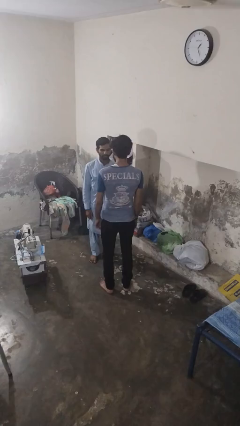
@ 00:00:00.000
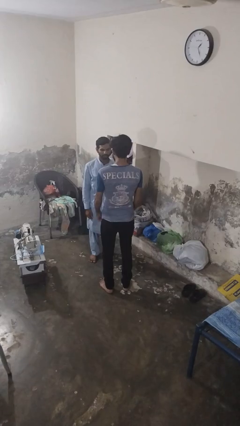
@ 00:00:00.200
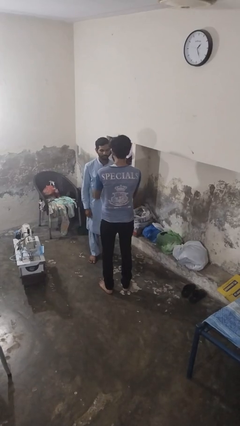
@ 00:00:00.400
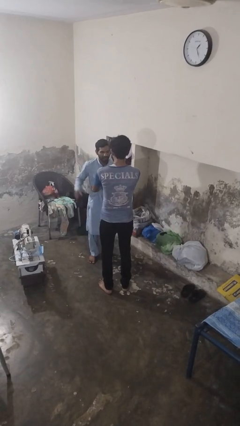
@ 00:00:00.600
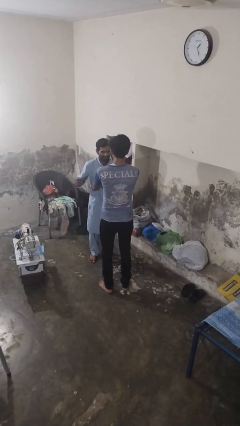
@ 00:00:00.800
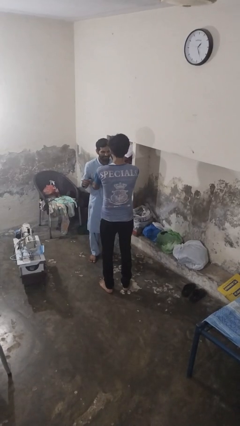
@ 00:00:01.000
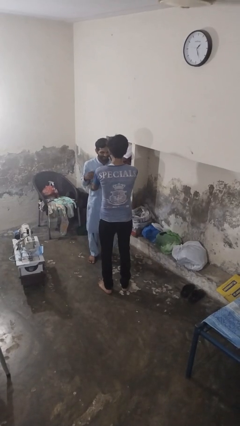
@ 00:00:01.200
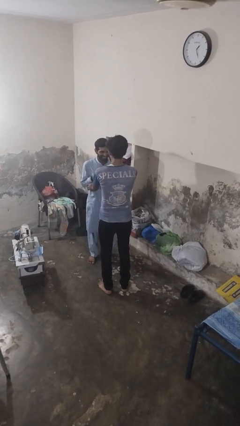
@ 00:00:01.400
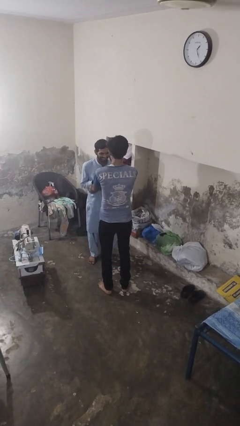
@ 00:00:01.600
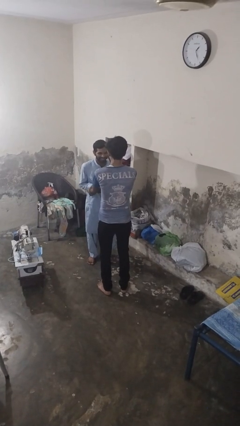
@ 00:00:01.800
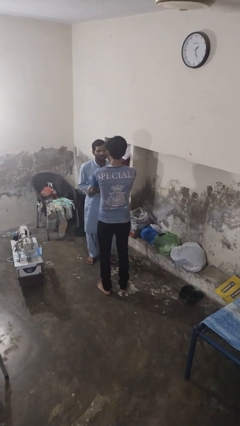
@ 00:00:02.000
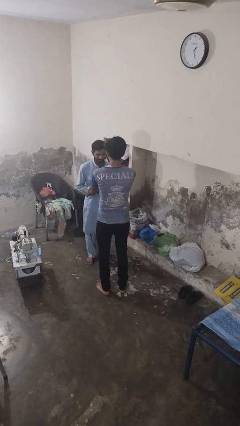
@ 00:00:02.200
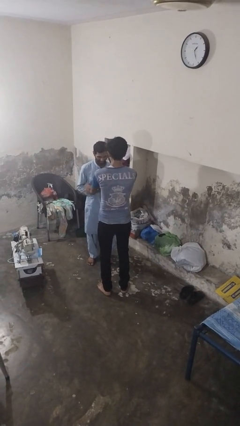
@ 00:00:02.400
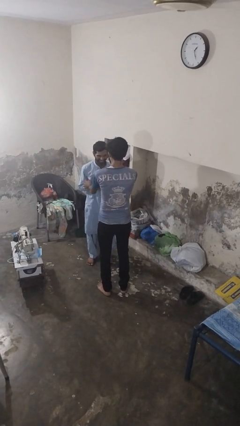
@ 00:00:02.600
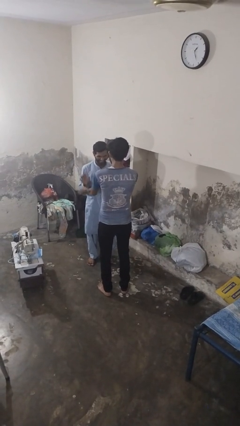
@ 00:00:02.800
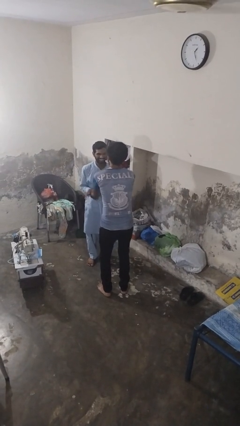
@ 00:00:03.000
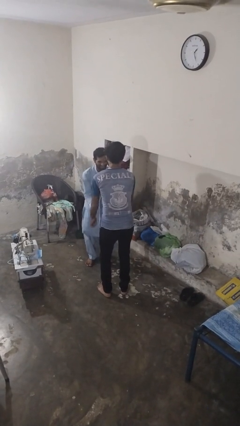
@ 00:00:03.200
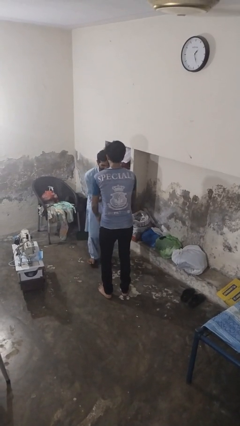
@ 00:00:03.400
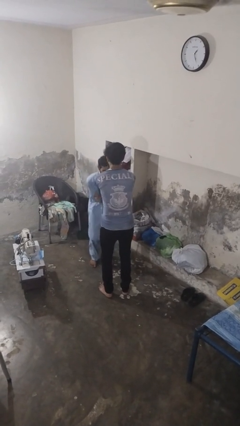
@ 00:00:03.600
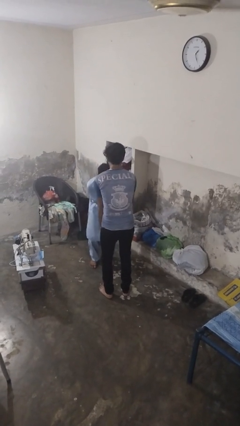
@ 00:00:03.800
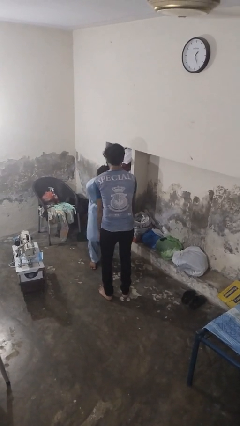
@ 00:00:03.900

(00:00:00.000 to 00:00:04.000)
person tickles person

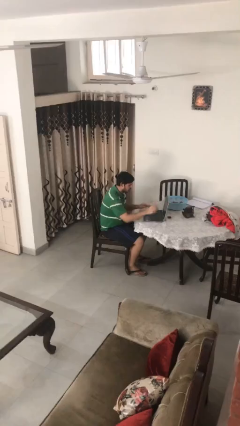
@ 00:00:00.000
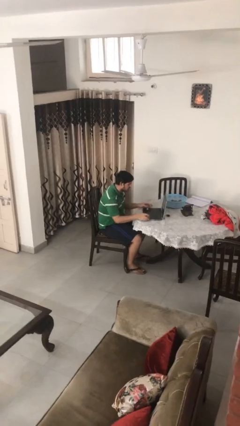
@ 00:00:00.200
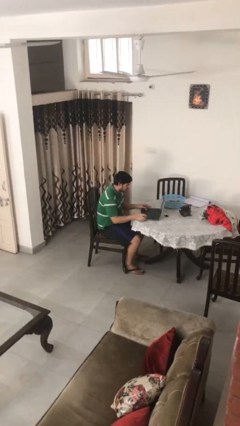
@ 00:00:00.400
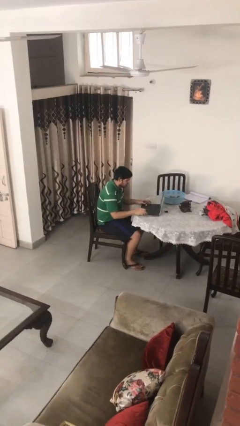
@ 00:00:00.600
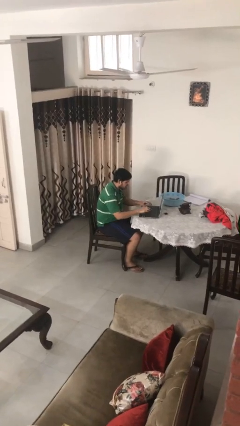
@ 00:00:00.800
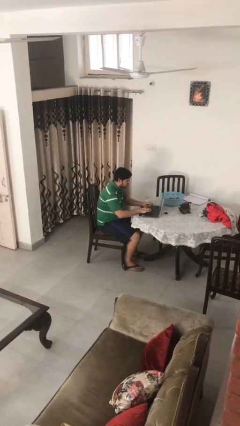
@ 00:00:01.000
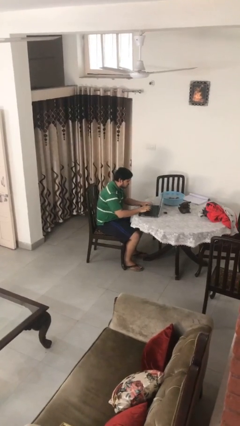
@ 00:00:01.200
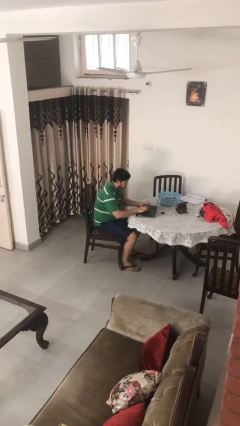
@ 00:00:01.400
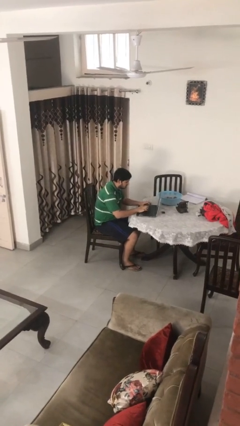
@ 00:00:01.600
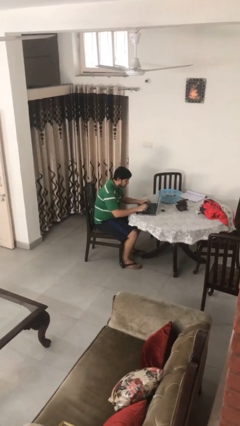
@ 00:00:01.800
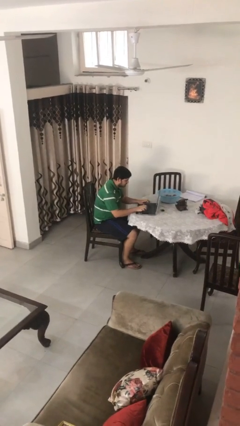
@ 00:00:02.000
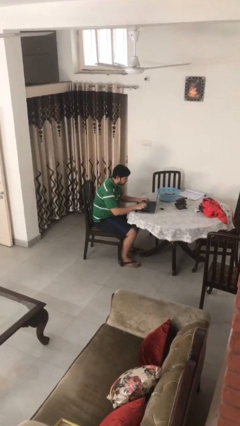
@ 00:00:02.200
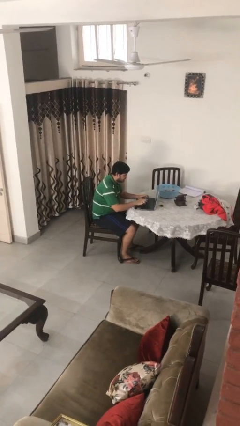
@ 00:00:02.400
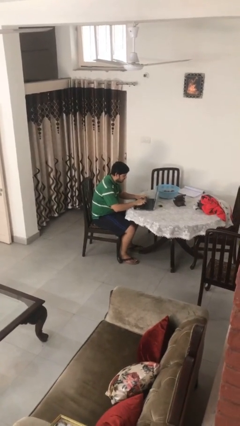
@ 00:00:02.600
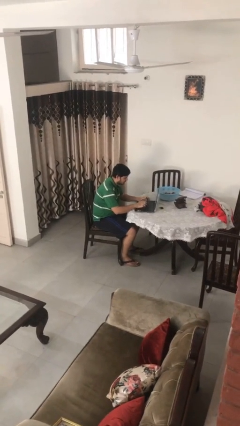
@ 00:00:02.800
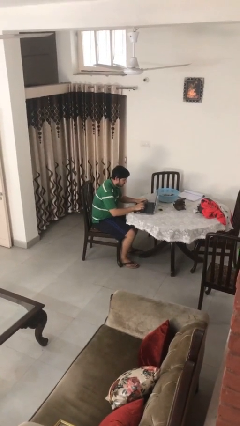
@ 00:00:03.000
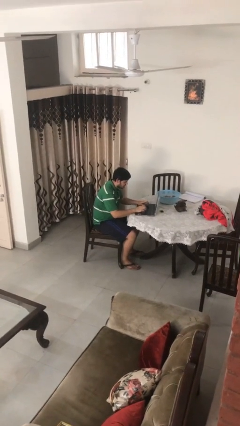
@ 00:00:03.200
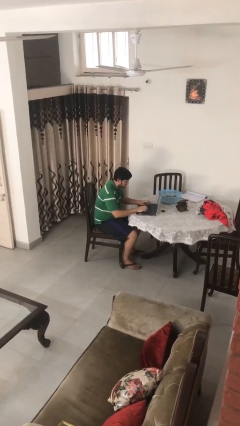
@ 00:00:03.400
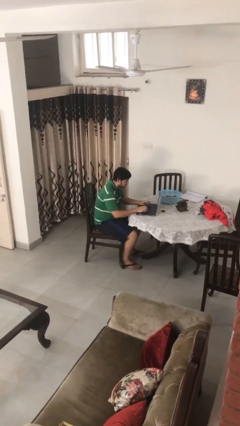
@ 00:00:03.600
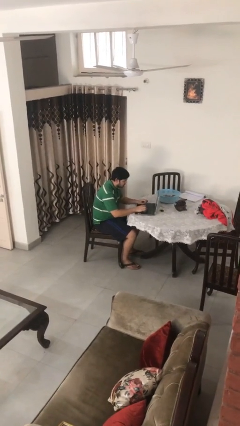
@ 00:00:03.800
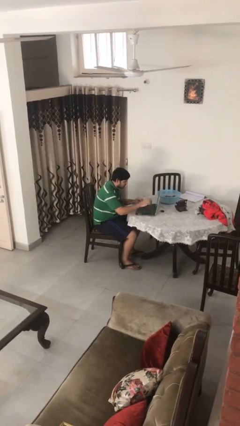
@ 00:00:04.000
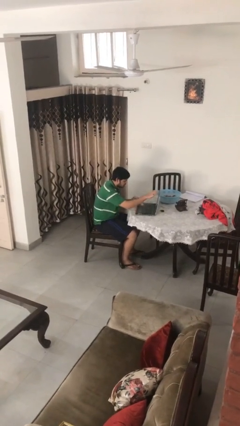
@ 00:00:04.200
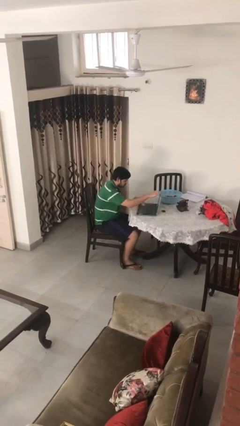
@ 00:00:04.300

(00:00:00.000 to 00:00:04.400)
person interacts with laptop

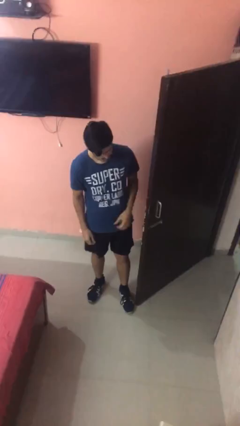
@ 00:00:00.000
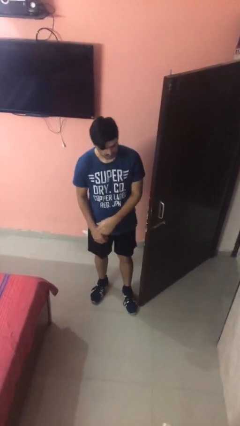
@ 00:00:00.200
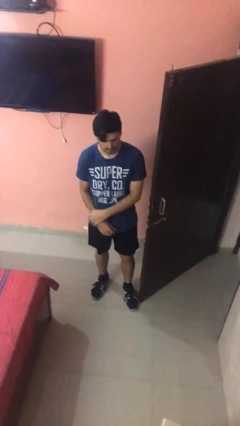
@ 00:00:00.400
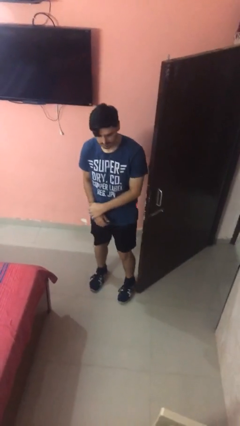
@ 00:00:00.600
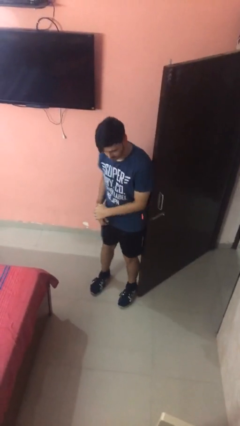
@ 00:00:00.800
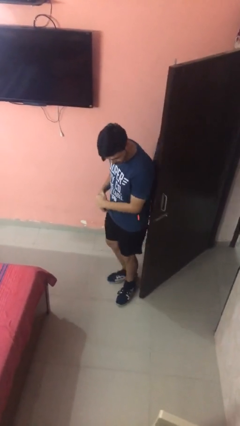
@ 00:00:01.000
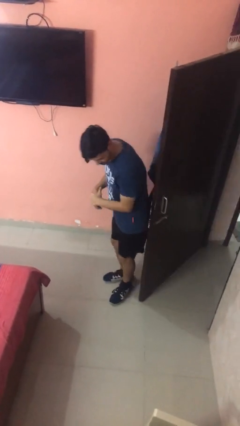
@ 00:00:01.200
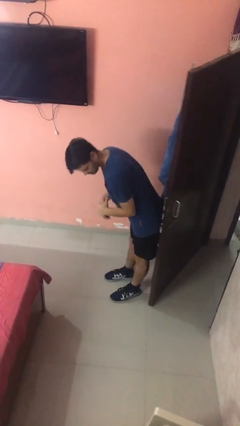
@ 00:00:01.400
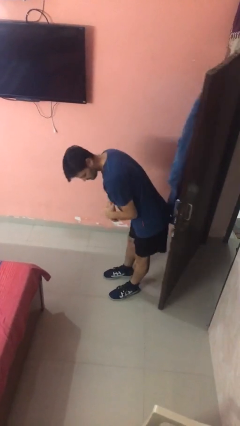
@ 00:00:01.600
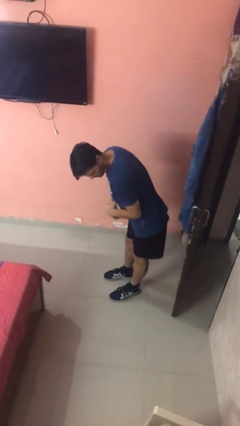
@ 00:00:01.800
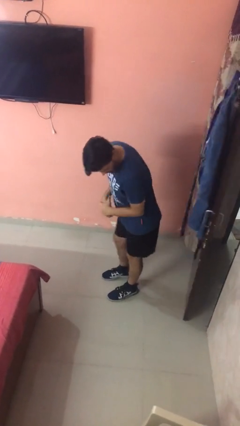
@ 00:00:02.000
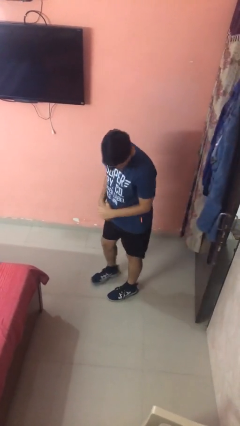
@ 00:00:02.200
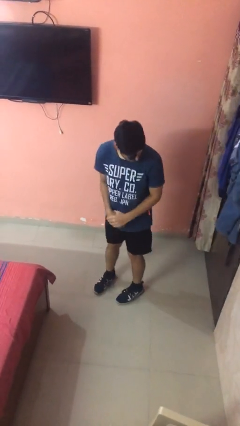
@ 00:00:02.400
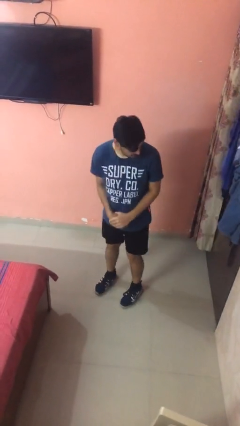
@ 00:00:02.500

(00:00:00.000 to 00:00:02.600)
person closes door with hip

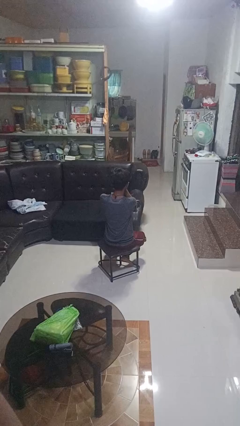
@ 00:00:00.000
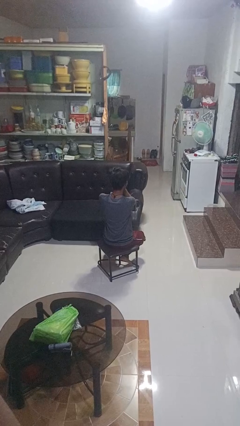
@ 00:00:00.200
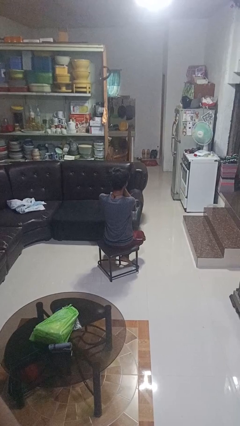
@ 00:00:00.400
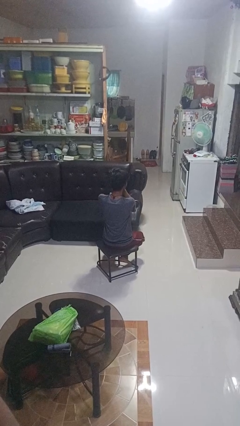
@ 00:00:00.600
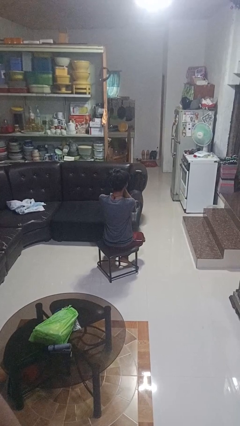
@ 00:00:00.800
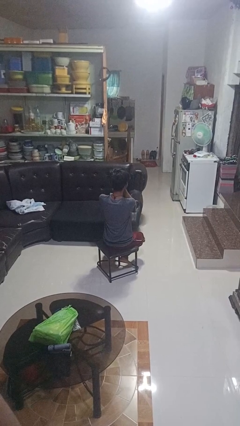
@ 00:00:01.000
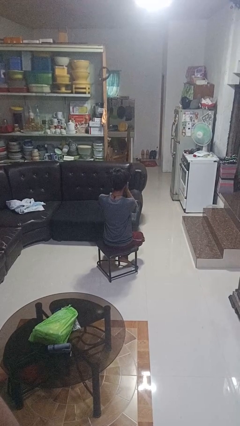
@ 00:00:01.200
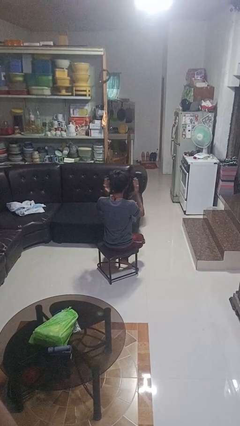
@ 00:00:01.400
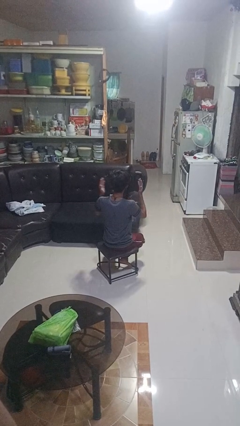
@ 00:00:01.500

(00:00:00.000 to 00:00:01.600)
person covers face with hands

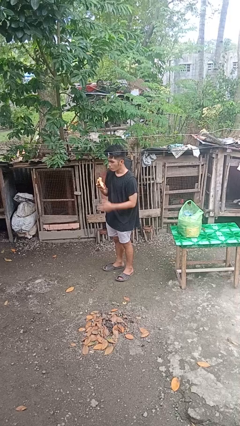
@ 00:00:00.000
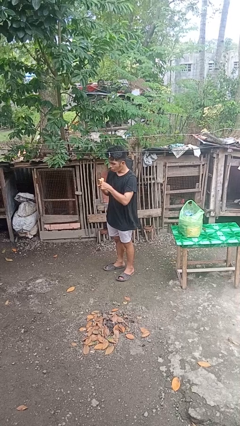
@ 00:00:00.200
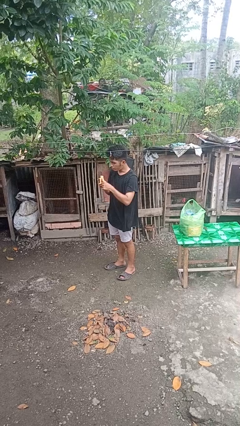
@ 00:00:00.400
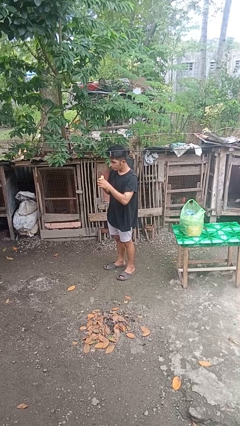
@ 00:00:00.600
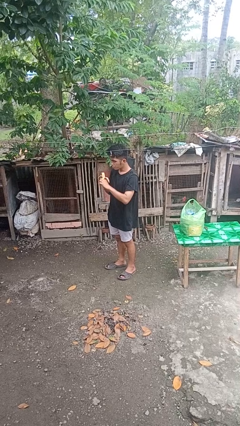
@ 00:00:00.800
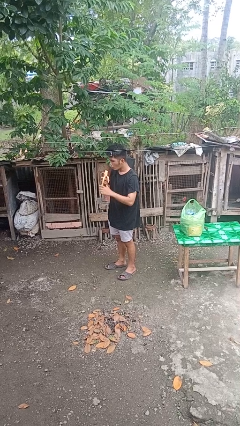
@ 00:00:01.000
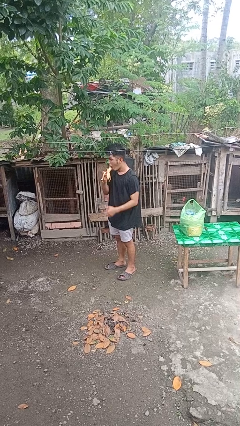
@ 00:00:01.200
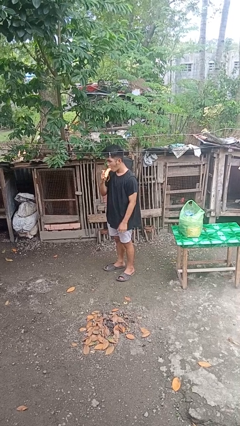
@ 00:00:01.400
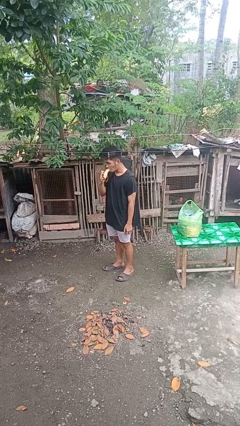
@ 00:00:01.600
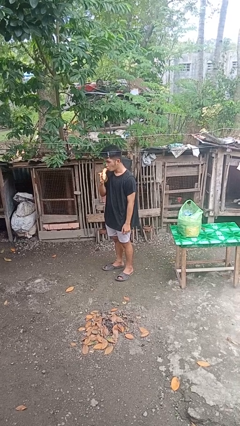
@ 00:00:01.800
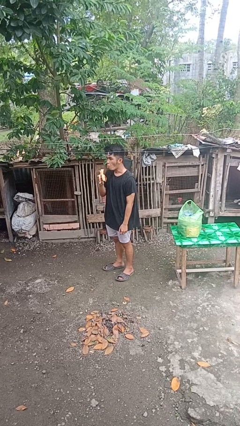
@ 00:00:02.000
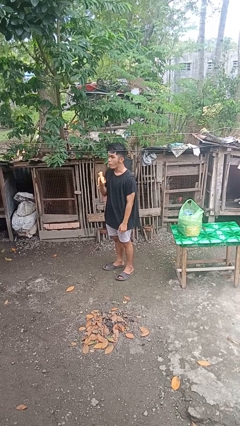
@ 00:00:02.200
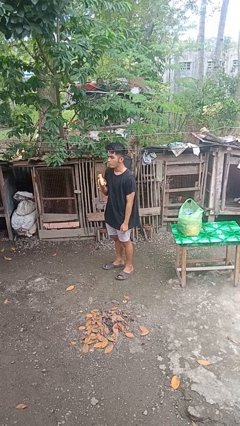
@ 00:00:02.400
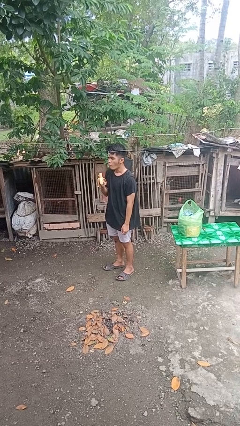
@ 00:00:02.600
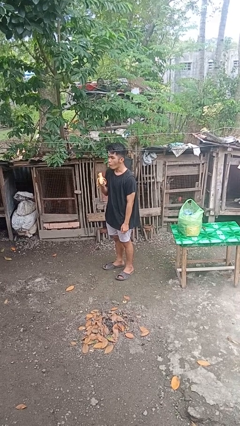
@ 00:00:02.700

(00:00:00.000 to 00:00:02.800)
person eats banana

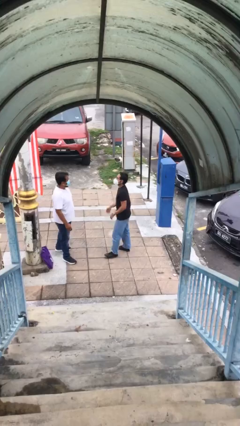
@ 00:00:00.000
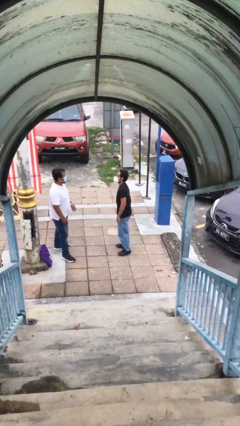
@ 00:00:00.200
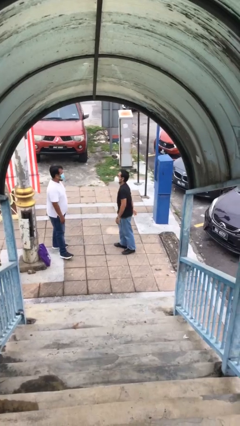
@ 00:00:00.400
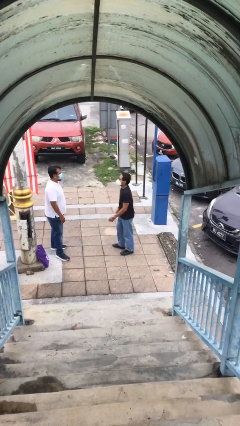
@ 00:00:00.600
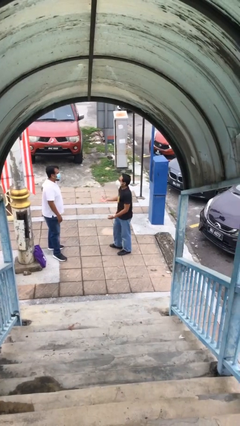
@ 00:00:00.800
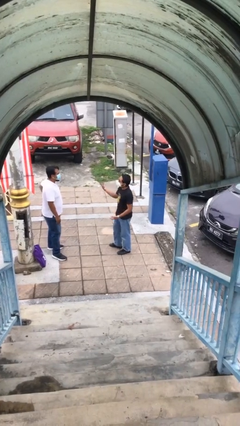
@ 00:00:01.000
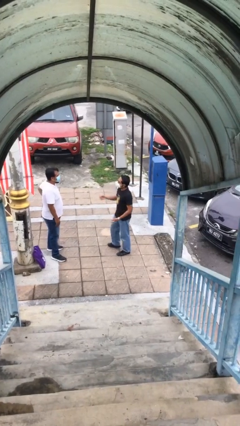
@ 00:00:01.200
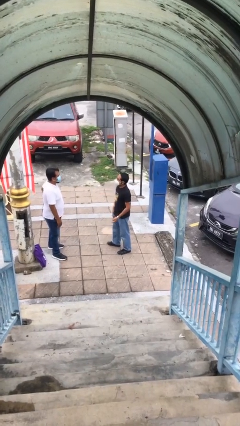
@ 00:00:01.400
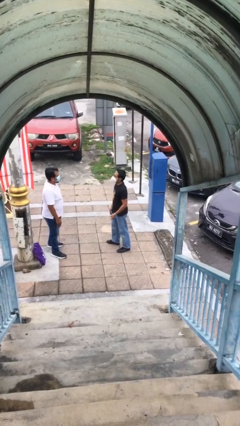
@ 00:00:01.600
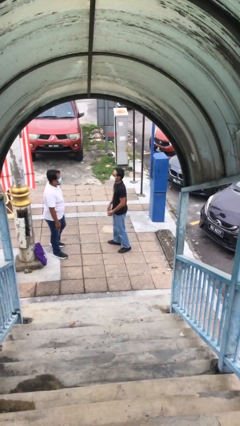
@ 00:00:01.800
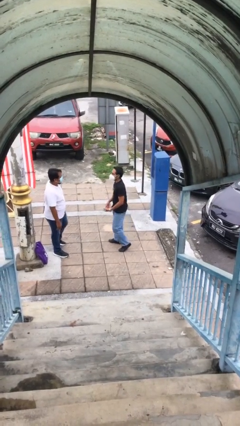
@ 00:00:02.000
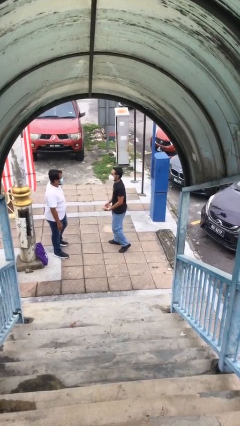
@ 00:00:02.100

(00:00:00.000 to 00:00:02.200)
person talks to person
